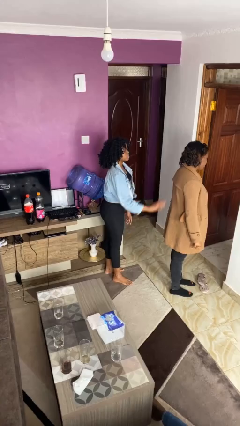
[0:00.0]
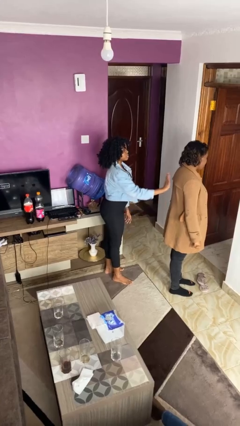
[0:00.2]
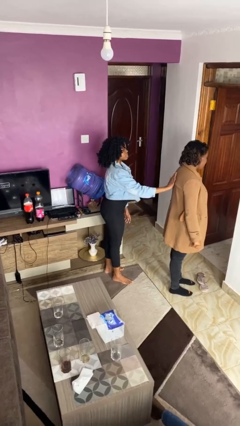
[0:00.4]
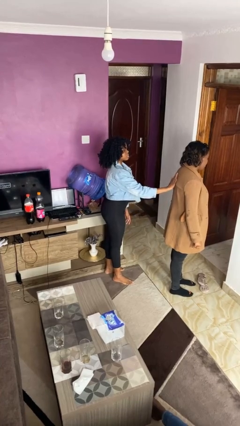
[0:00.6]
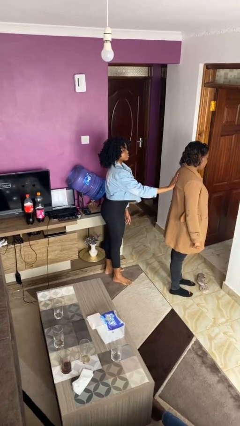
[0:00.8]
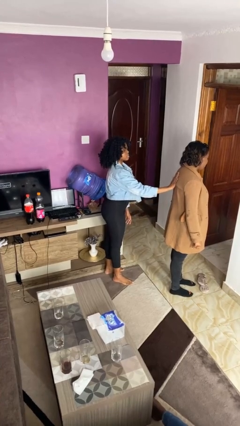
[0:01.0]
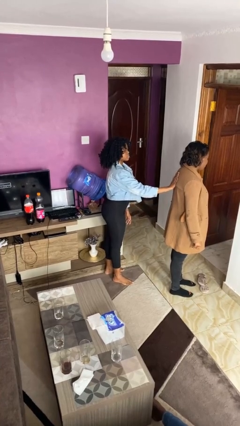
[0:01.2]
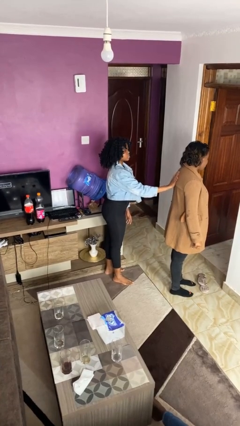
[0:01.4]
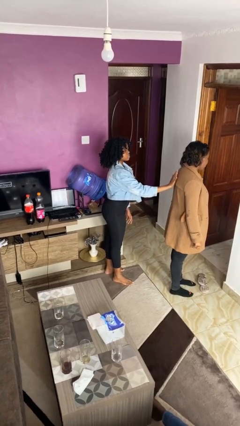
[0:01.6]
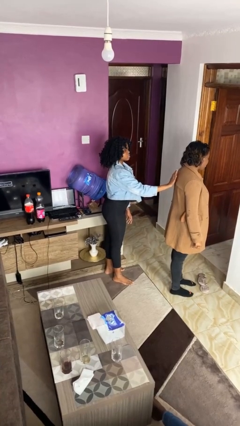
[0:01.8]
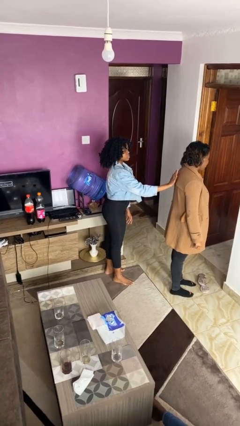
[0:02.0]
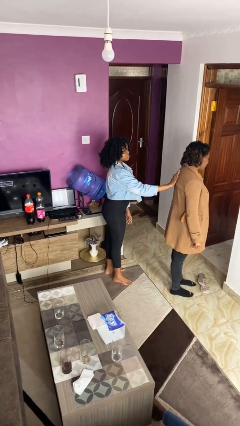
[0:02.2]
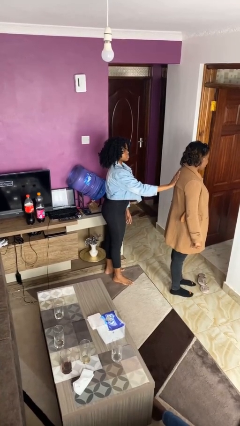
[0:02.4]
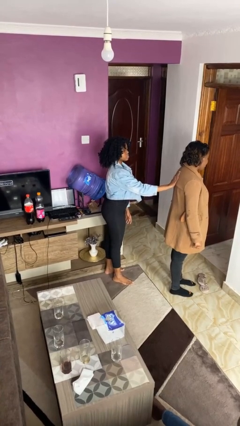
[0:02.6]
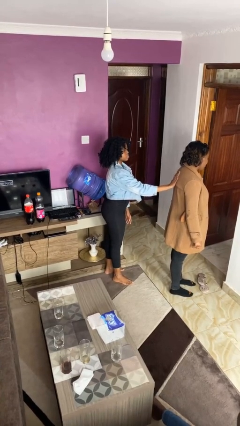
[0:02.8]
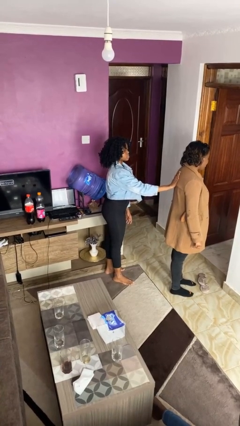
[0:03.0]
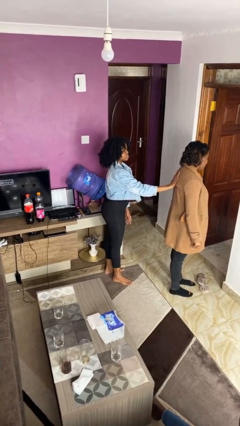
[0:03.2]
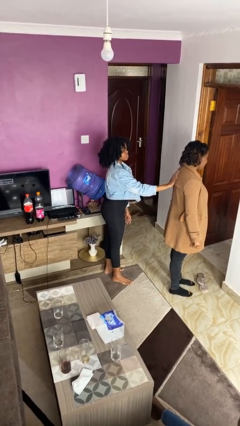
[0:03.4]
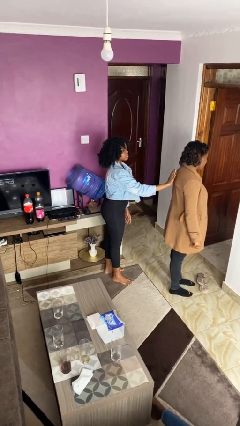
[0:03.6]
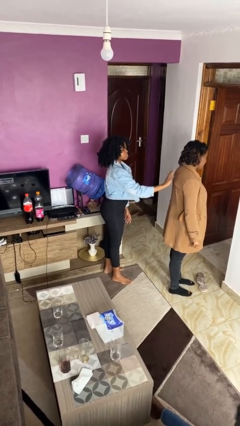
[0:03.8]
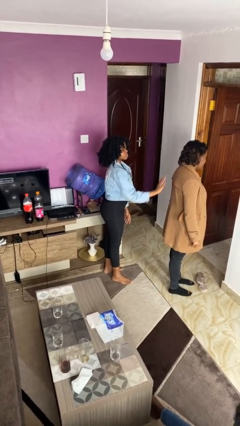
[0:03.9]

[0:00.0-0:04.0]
person touches back of person

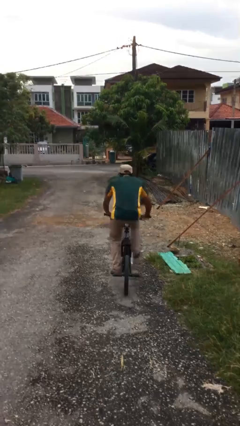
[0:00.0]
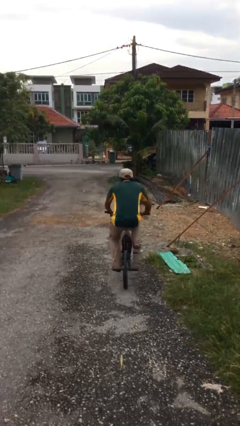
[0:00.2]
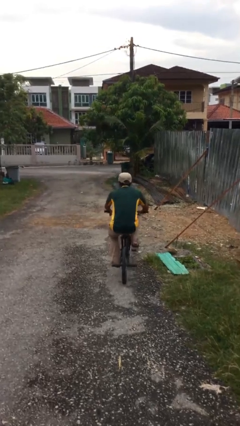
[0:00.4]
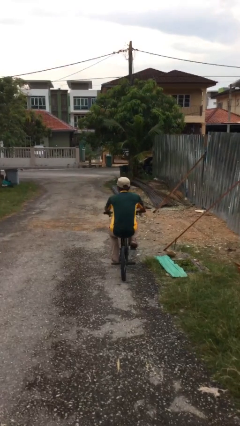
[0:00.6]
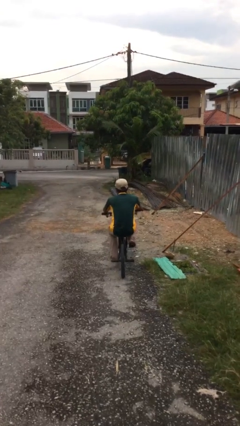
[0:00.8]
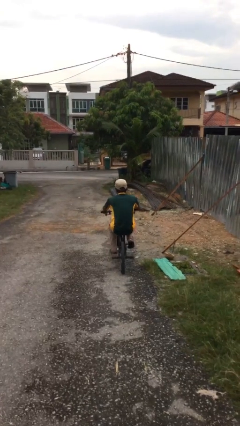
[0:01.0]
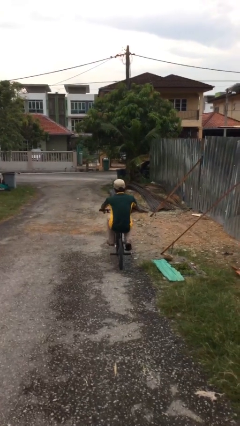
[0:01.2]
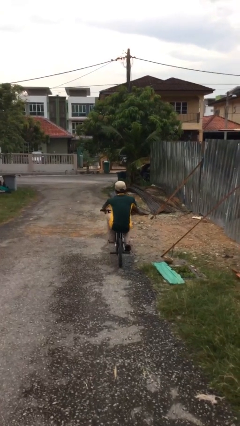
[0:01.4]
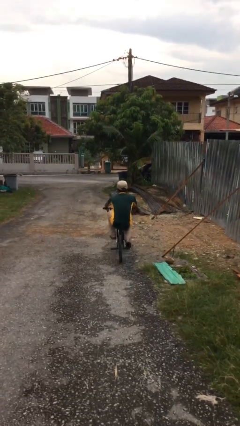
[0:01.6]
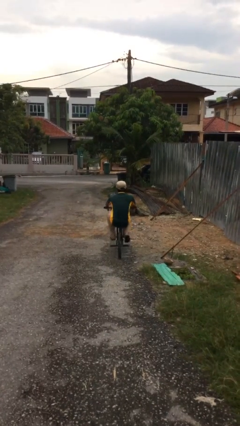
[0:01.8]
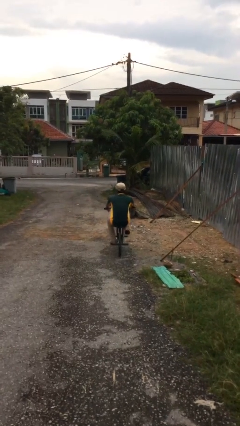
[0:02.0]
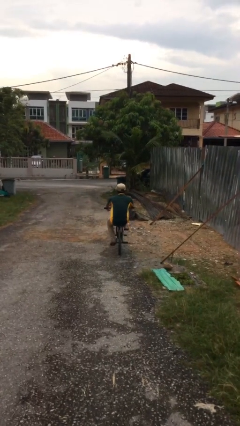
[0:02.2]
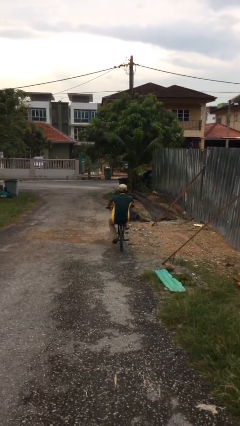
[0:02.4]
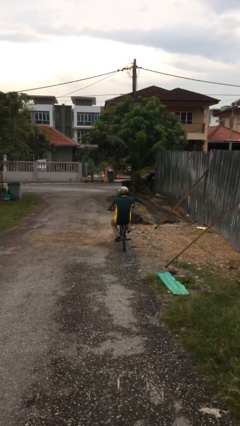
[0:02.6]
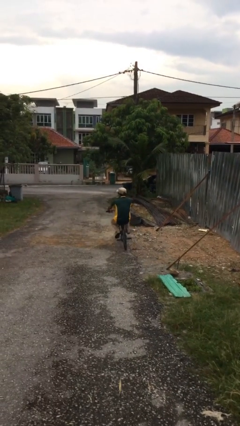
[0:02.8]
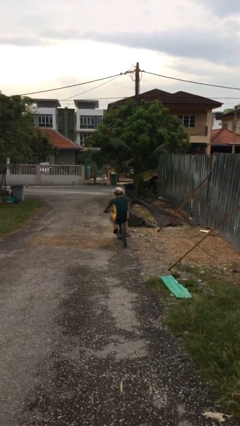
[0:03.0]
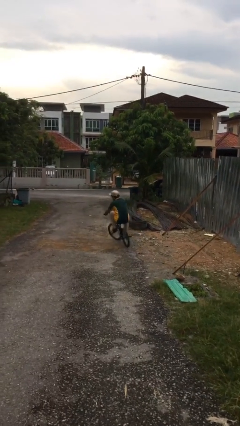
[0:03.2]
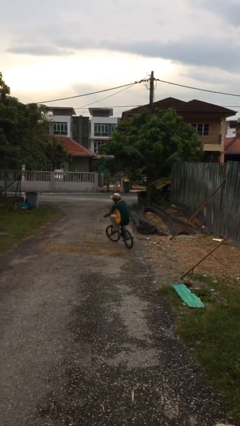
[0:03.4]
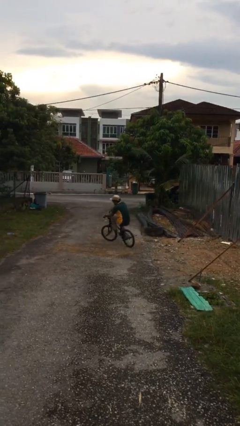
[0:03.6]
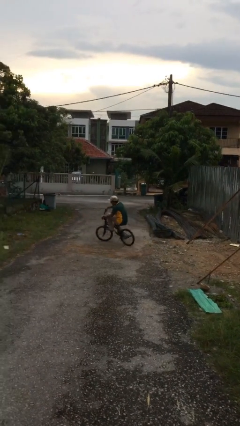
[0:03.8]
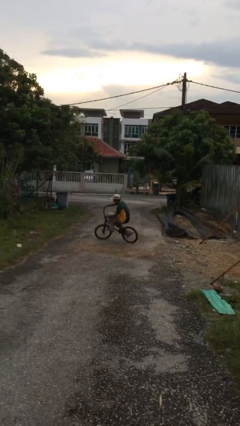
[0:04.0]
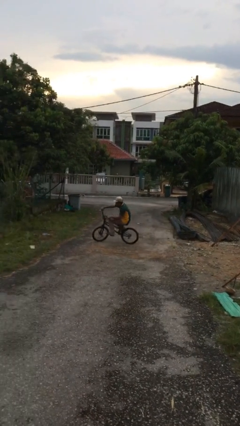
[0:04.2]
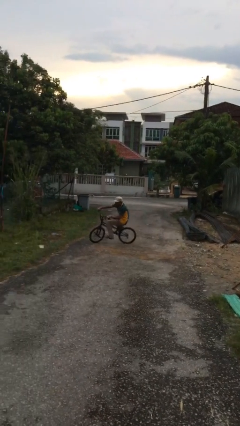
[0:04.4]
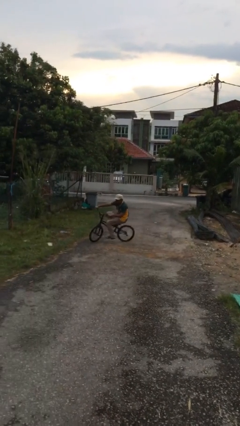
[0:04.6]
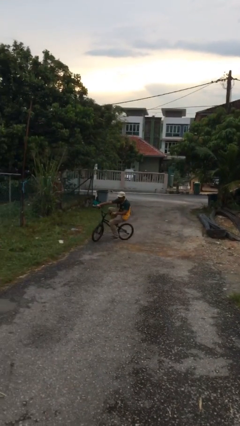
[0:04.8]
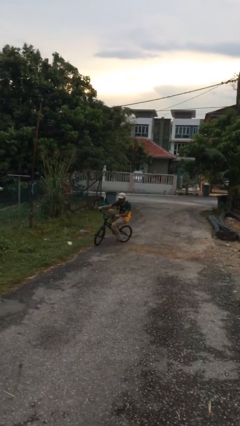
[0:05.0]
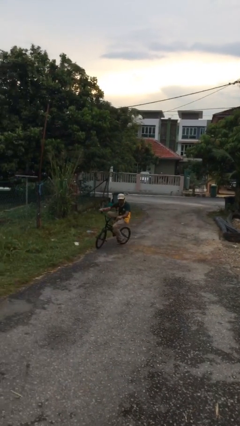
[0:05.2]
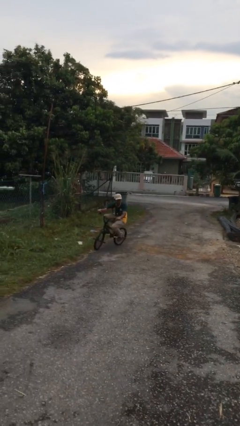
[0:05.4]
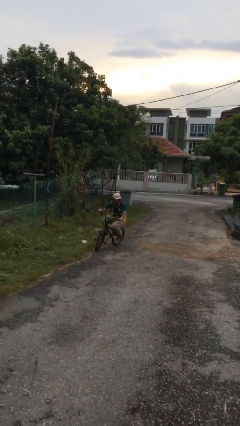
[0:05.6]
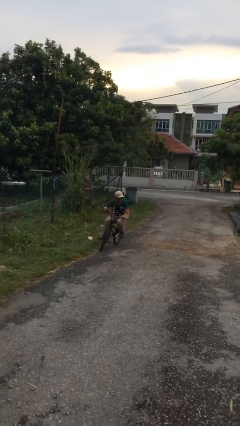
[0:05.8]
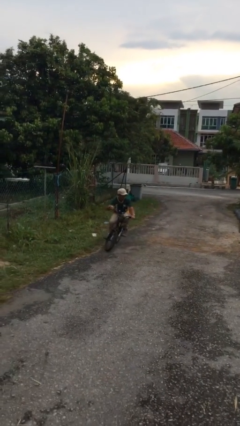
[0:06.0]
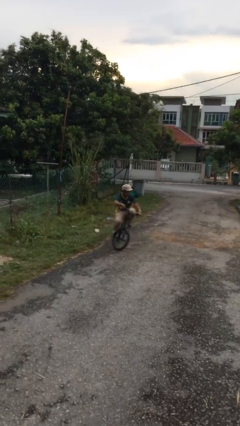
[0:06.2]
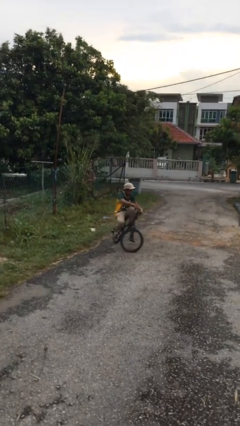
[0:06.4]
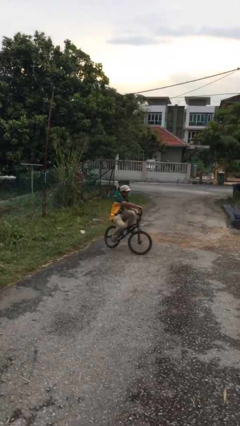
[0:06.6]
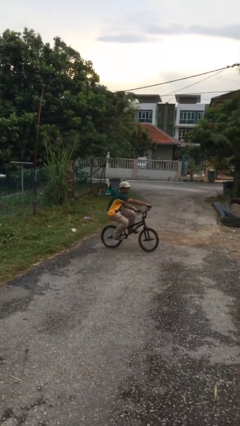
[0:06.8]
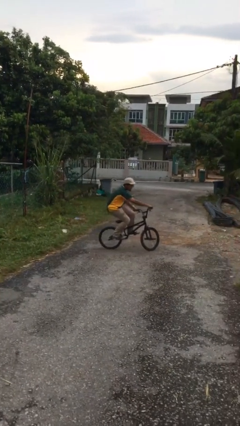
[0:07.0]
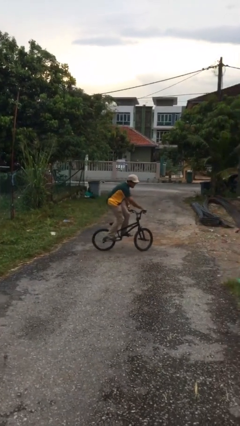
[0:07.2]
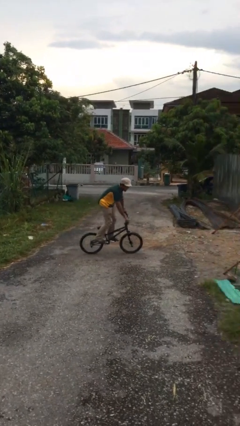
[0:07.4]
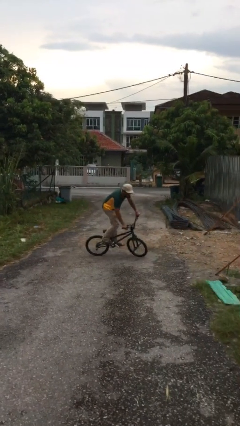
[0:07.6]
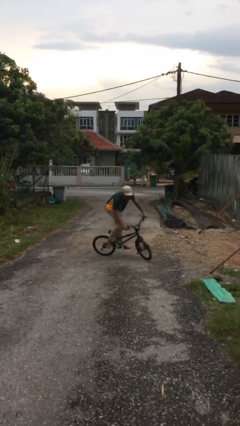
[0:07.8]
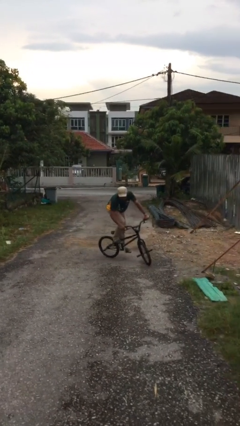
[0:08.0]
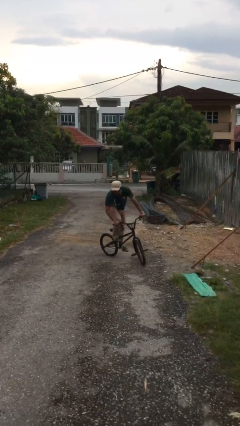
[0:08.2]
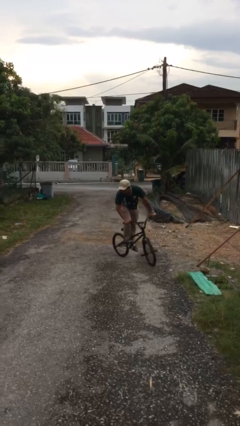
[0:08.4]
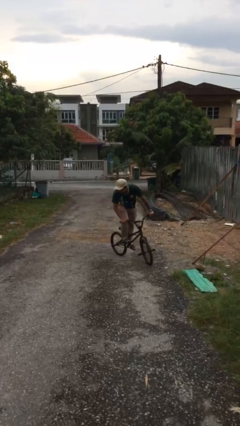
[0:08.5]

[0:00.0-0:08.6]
person rides bicycle

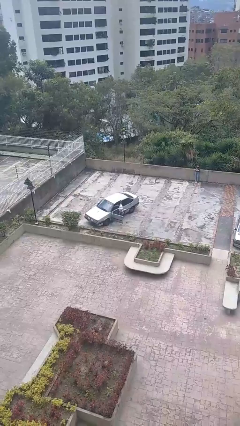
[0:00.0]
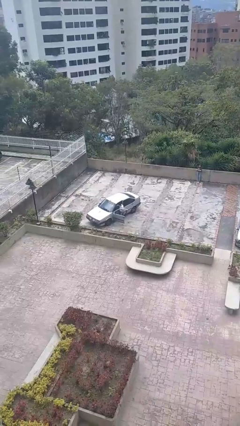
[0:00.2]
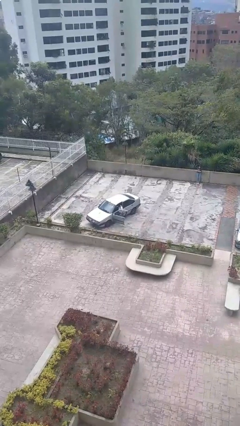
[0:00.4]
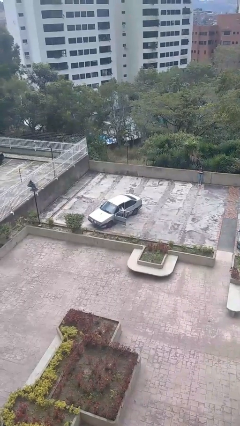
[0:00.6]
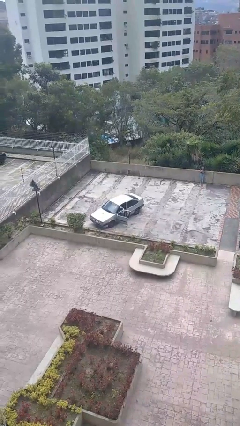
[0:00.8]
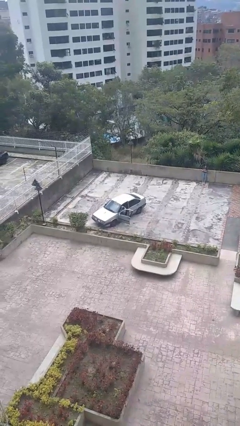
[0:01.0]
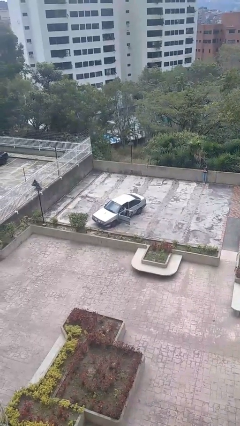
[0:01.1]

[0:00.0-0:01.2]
person enters car

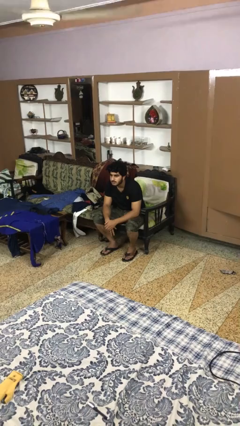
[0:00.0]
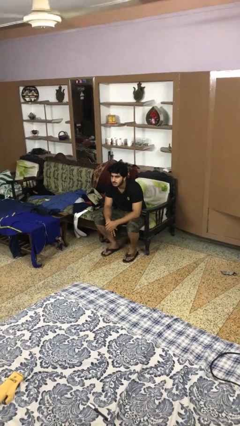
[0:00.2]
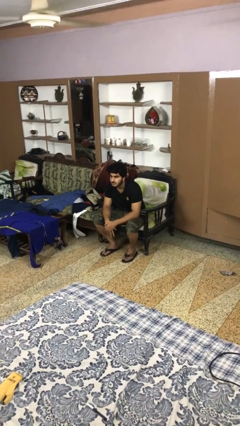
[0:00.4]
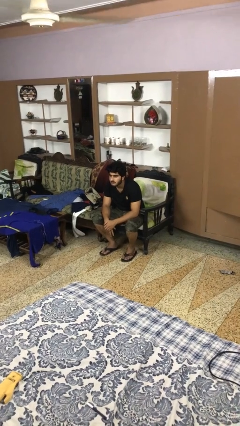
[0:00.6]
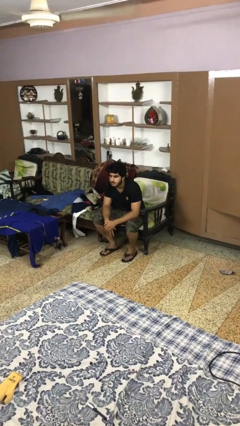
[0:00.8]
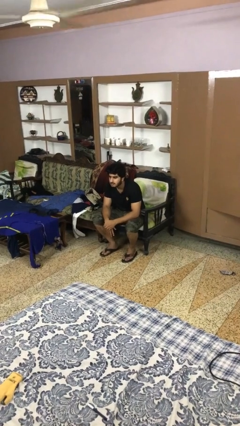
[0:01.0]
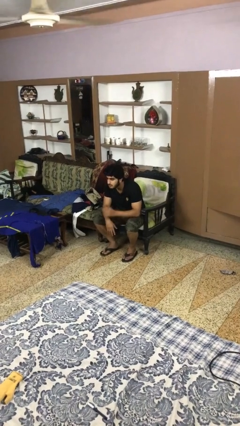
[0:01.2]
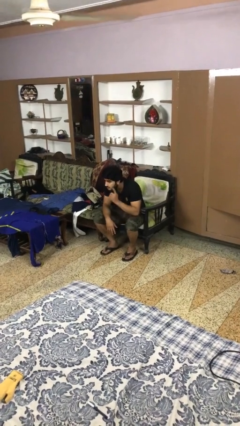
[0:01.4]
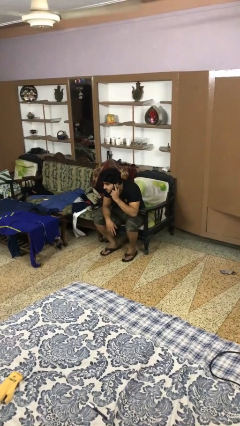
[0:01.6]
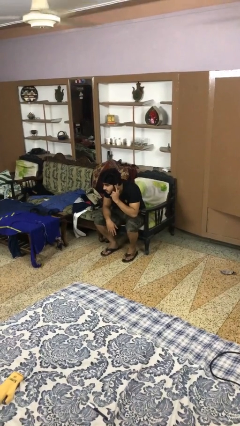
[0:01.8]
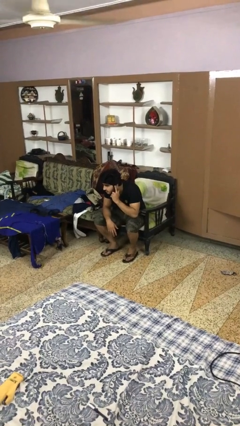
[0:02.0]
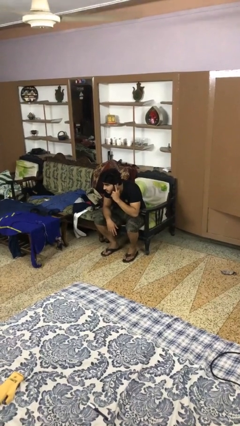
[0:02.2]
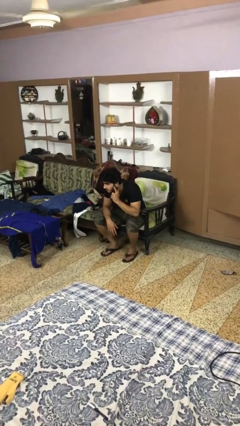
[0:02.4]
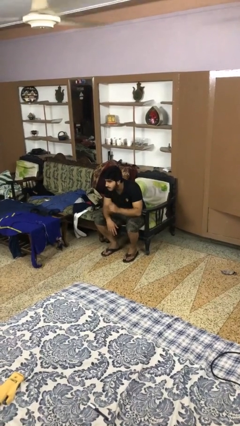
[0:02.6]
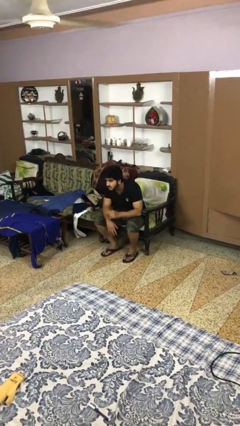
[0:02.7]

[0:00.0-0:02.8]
person gestures listen closely

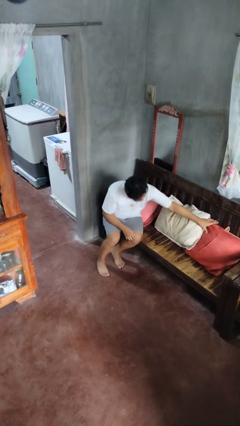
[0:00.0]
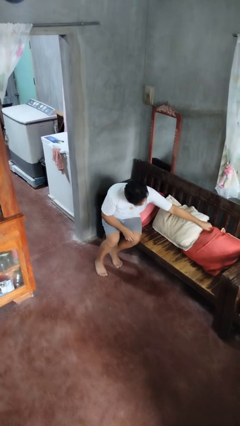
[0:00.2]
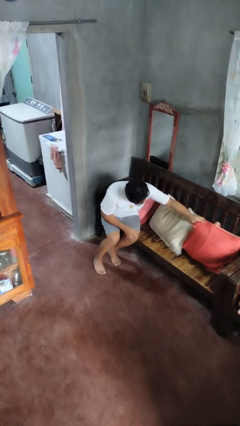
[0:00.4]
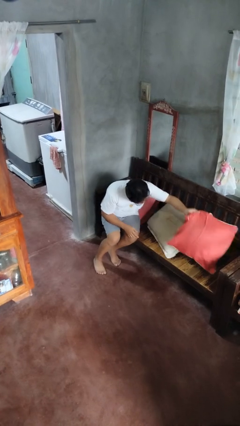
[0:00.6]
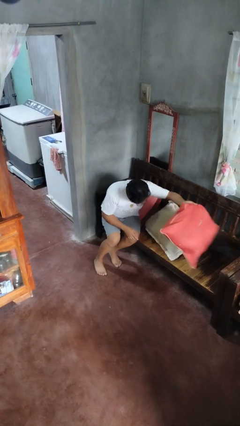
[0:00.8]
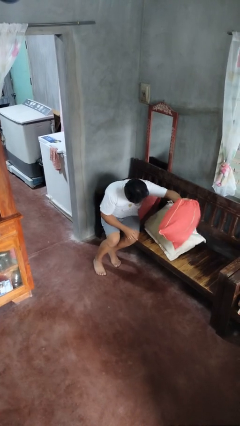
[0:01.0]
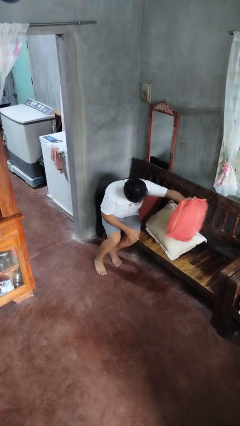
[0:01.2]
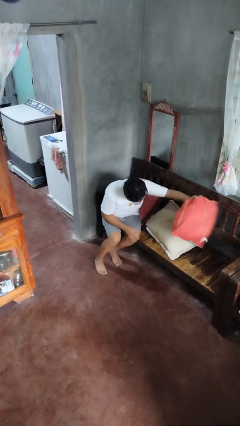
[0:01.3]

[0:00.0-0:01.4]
person searches in couch
